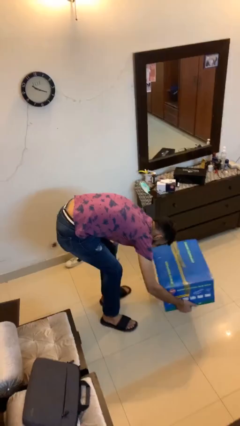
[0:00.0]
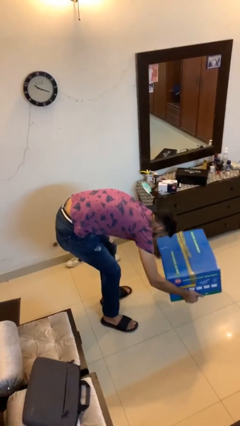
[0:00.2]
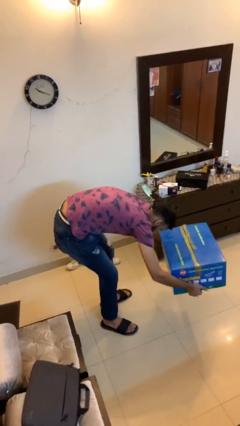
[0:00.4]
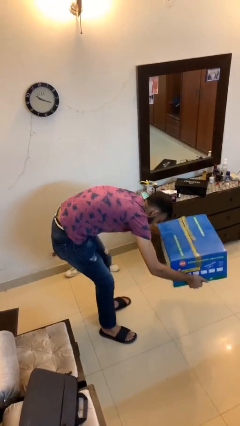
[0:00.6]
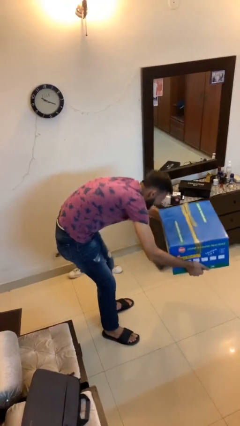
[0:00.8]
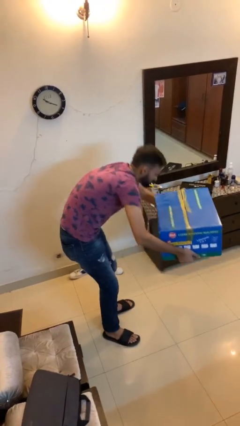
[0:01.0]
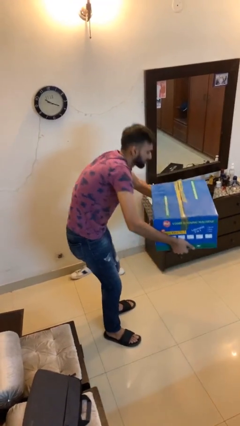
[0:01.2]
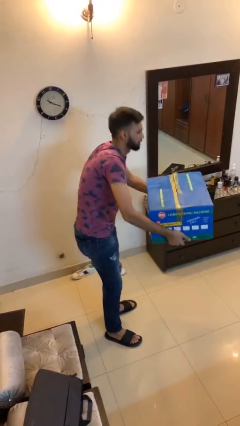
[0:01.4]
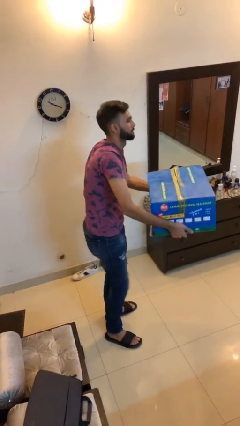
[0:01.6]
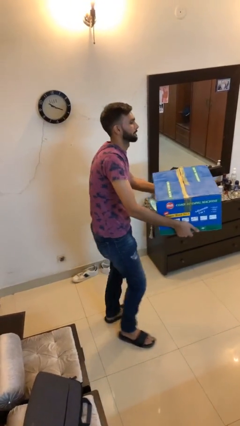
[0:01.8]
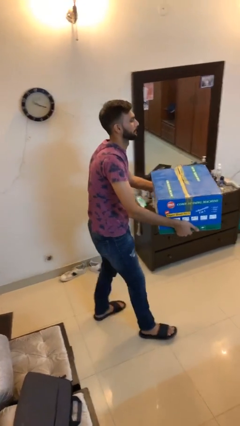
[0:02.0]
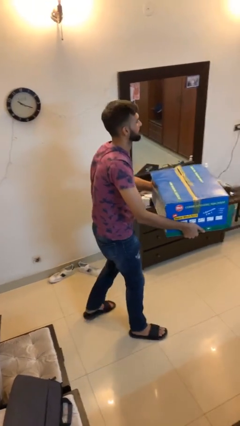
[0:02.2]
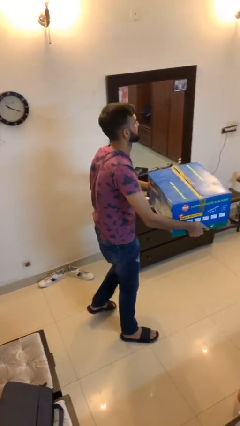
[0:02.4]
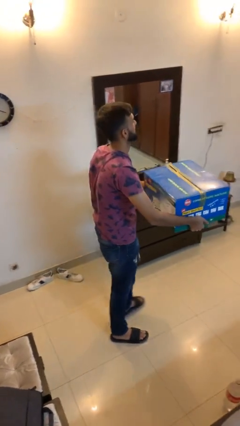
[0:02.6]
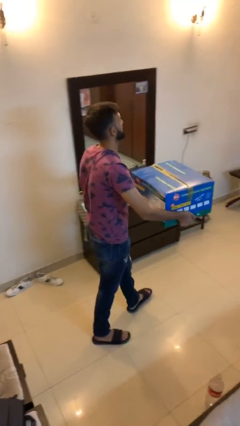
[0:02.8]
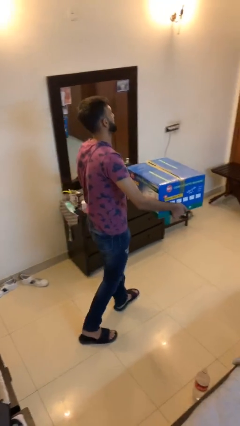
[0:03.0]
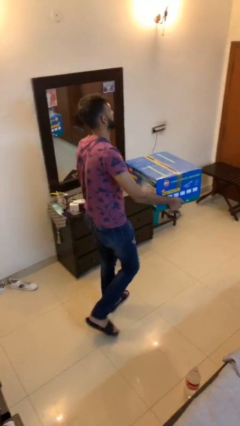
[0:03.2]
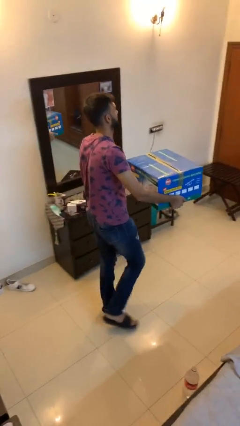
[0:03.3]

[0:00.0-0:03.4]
person carries heavy object

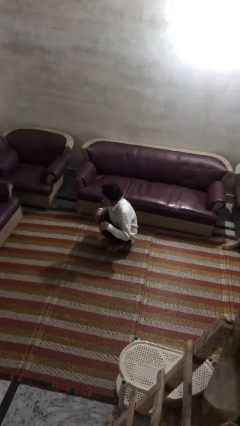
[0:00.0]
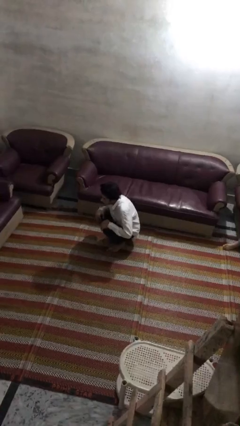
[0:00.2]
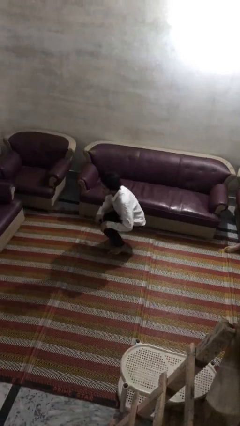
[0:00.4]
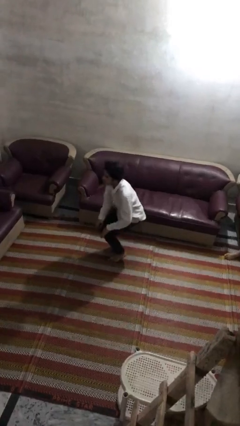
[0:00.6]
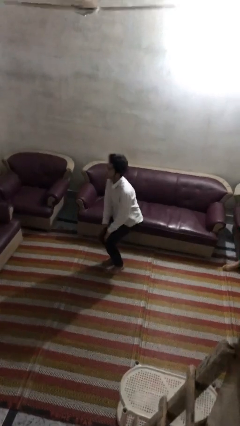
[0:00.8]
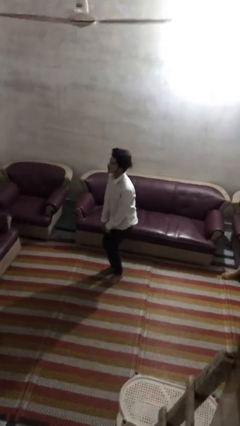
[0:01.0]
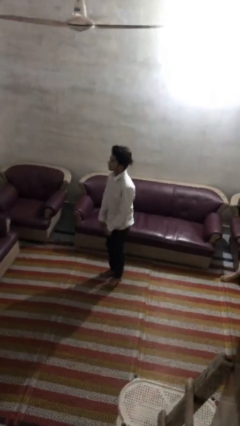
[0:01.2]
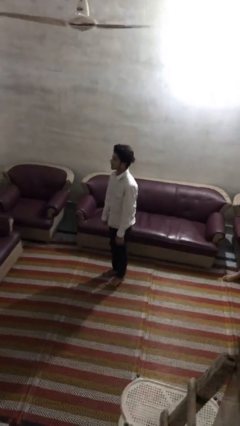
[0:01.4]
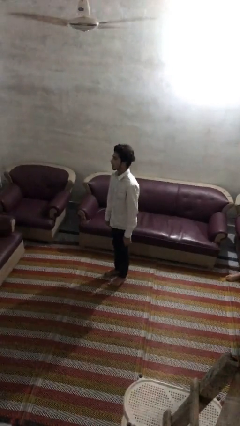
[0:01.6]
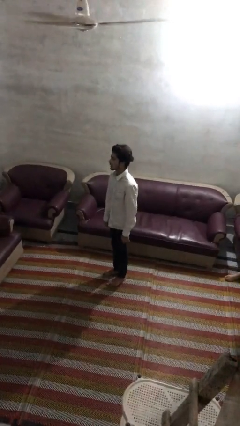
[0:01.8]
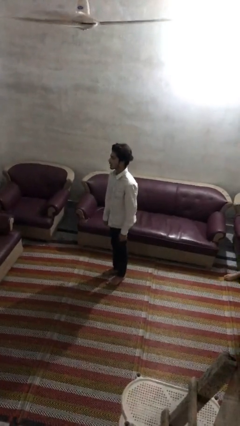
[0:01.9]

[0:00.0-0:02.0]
person stands up

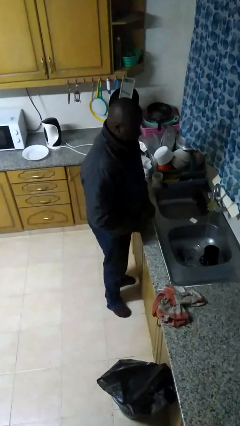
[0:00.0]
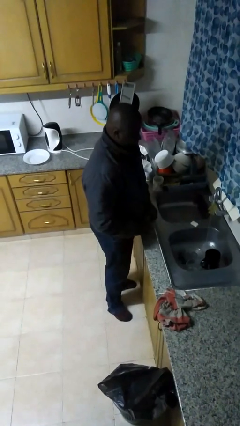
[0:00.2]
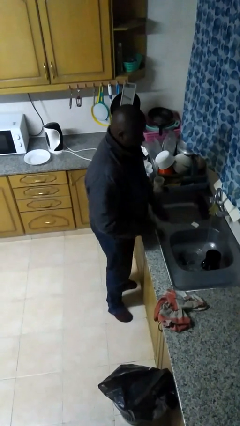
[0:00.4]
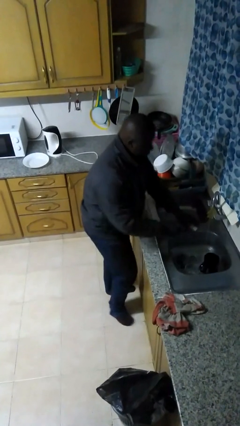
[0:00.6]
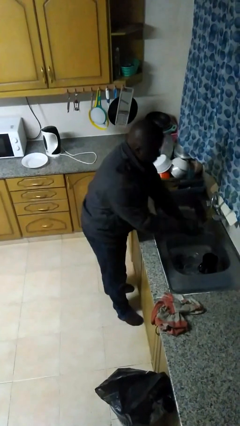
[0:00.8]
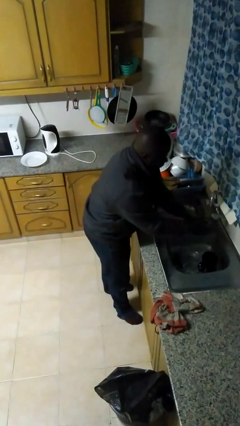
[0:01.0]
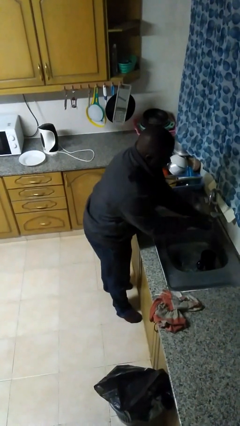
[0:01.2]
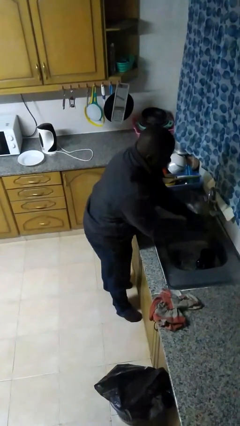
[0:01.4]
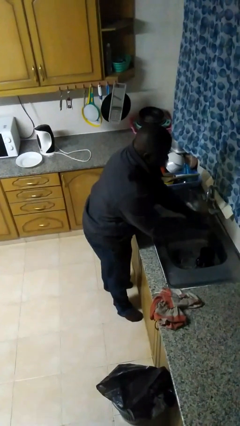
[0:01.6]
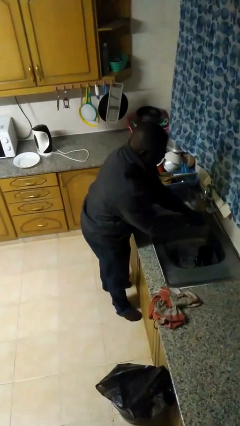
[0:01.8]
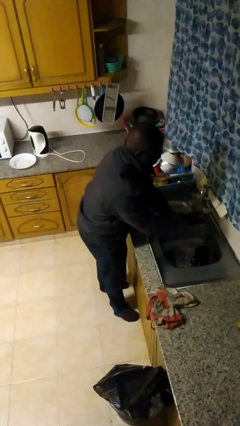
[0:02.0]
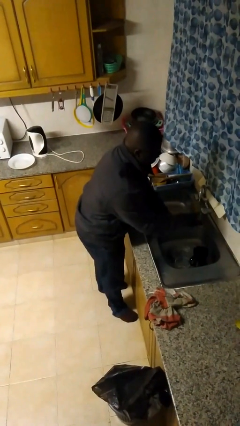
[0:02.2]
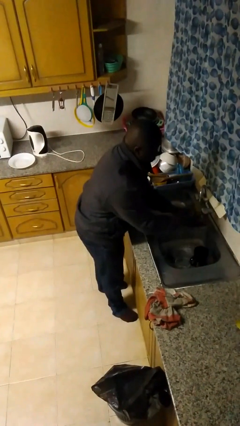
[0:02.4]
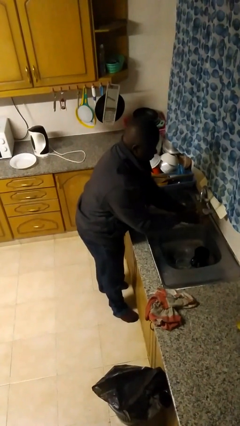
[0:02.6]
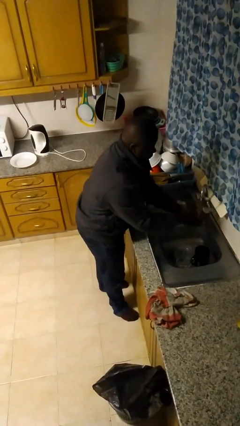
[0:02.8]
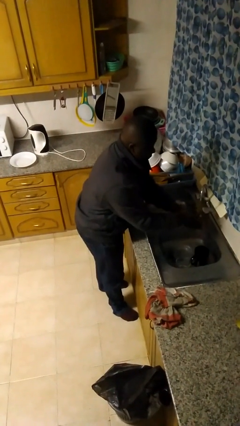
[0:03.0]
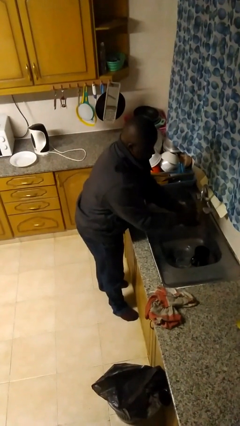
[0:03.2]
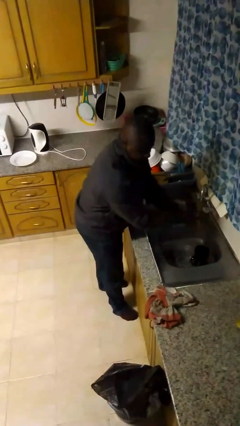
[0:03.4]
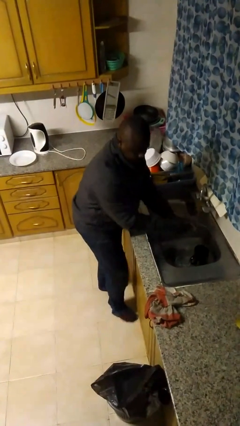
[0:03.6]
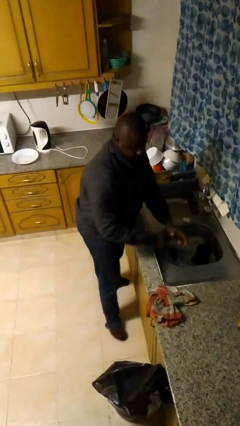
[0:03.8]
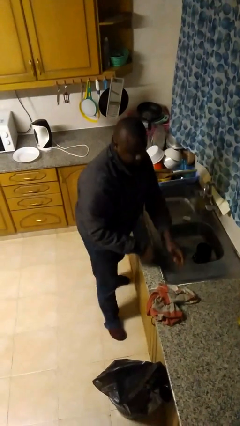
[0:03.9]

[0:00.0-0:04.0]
person washes hands

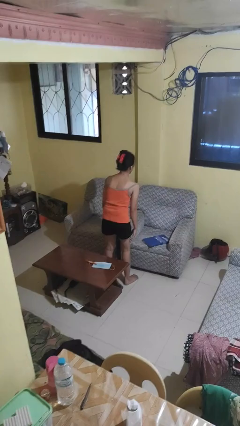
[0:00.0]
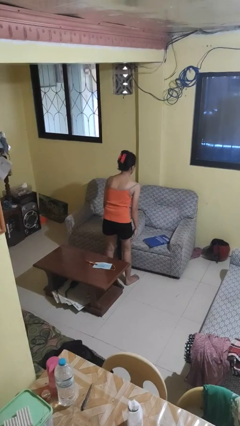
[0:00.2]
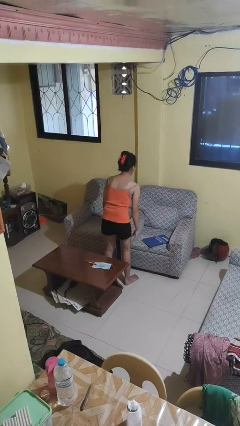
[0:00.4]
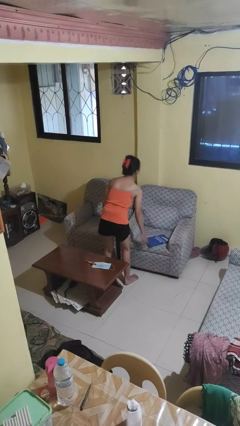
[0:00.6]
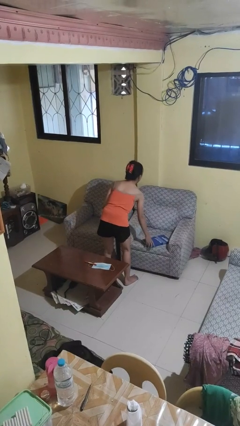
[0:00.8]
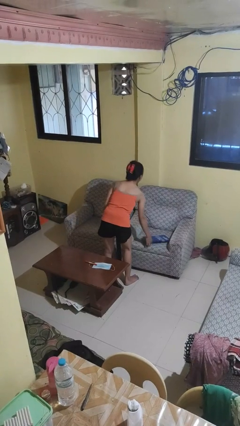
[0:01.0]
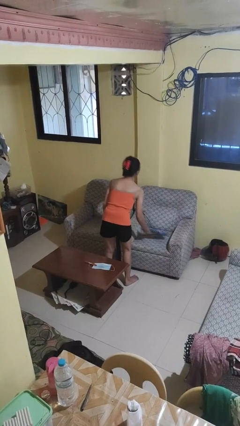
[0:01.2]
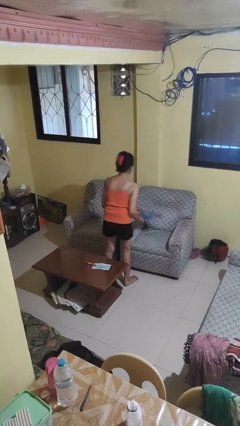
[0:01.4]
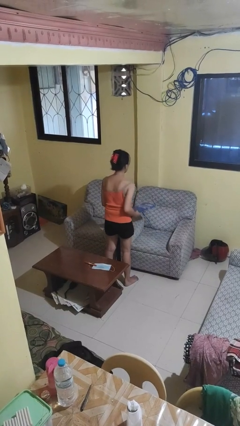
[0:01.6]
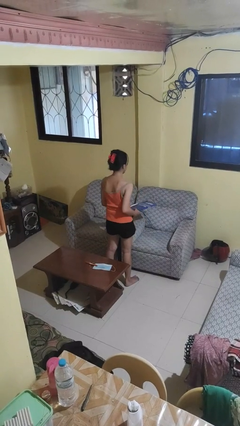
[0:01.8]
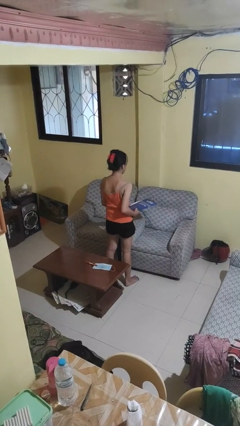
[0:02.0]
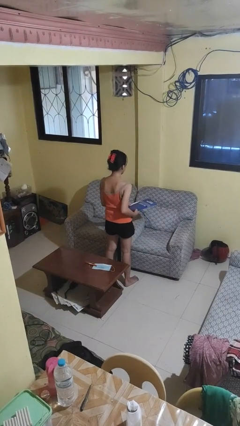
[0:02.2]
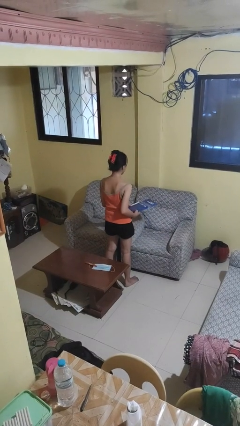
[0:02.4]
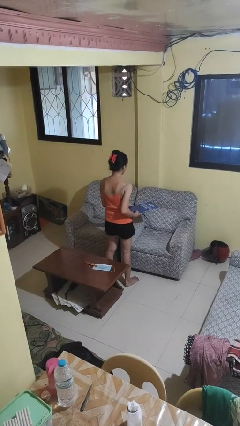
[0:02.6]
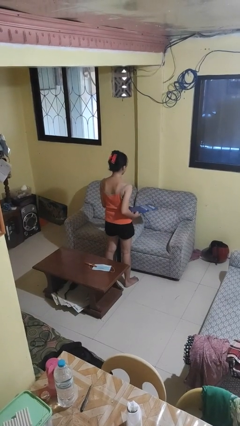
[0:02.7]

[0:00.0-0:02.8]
person picks up object from couch

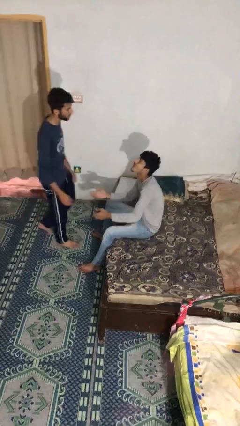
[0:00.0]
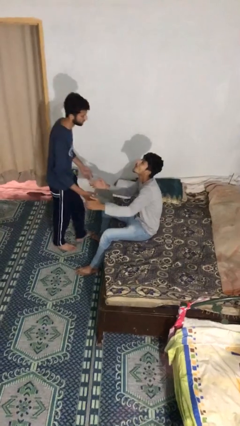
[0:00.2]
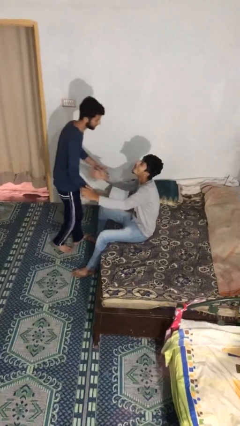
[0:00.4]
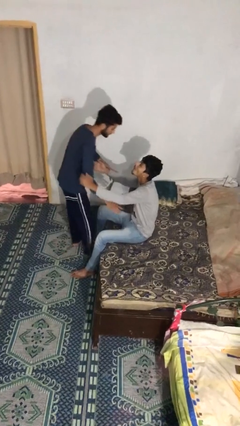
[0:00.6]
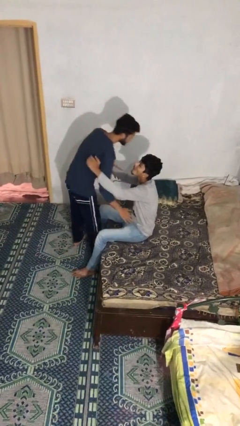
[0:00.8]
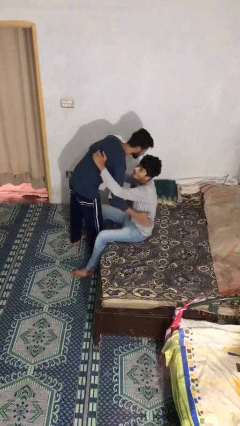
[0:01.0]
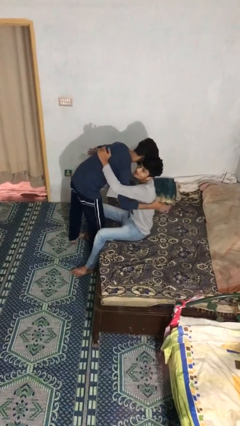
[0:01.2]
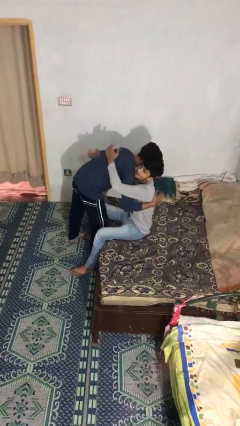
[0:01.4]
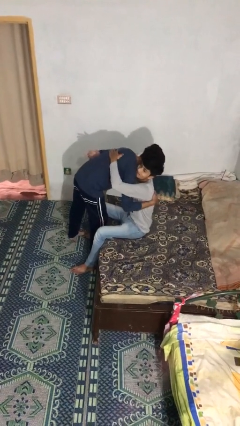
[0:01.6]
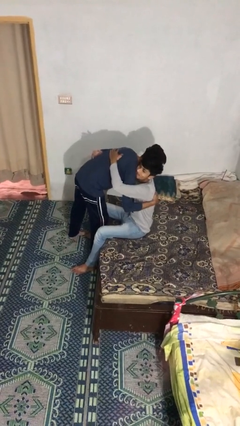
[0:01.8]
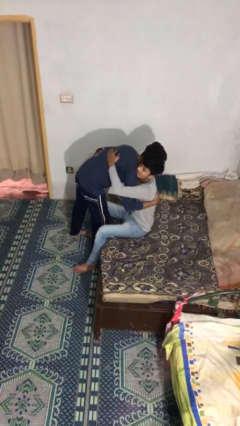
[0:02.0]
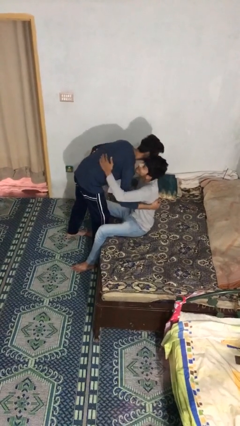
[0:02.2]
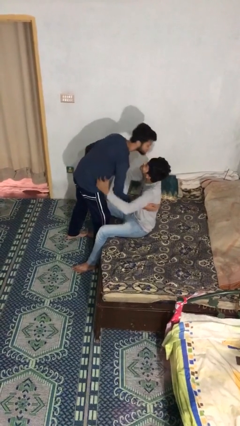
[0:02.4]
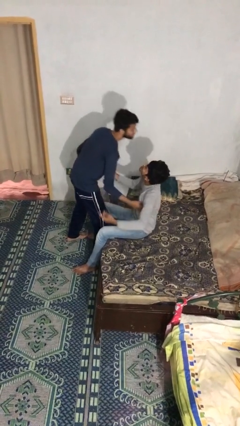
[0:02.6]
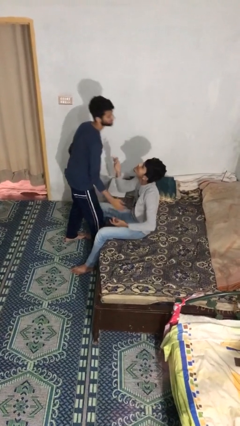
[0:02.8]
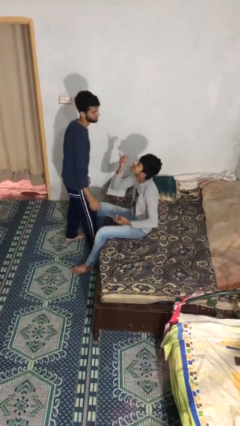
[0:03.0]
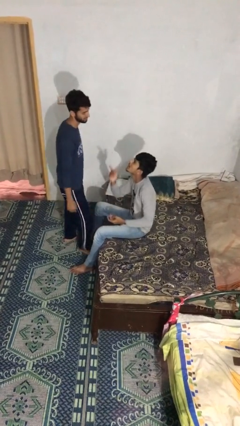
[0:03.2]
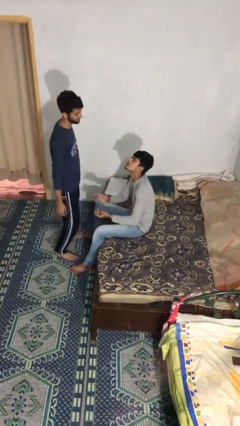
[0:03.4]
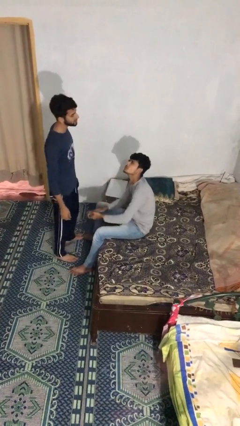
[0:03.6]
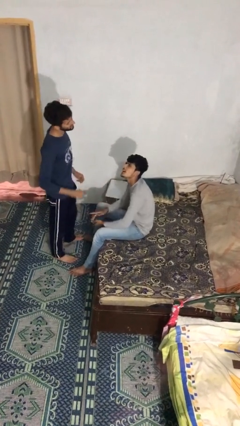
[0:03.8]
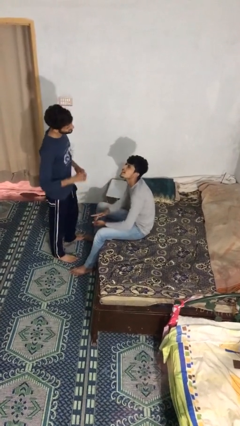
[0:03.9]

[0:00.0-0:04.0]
person embraces person

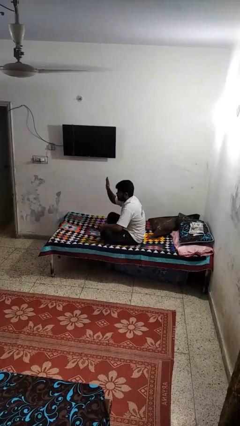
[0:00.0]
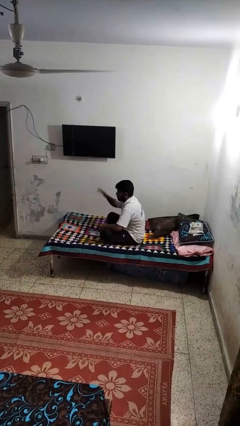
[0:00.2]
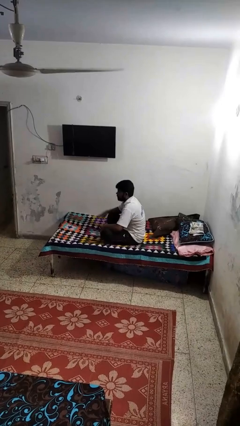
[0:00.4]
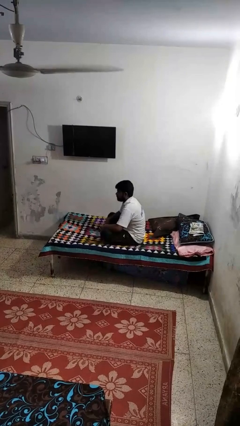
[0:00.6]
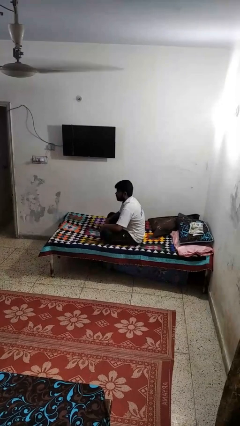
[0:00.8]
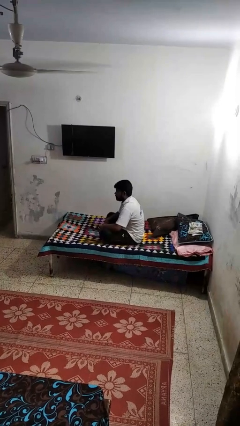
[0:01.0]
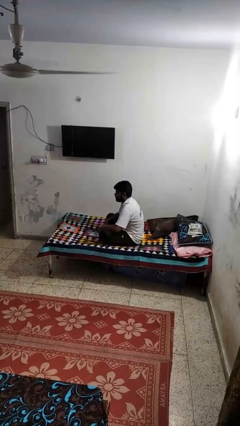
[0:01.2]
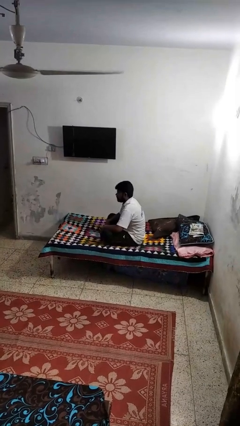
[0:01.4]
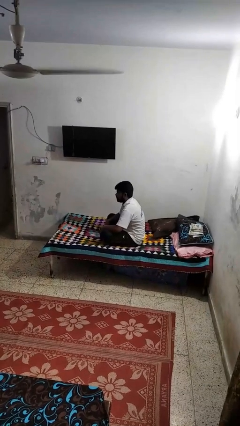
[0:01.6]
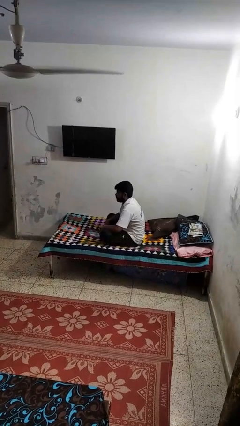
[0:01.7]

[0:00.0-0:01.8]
person gestures lower hand
